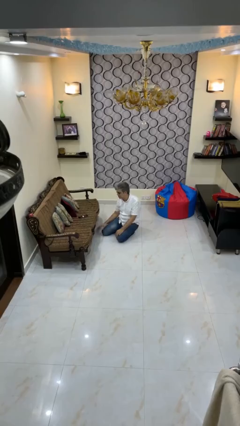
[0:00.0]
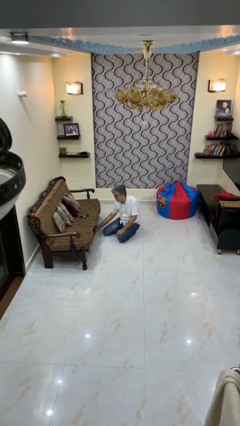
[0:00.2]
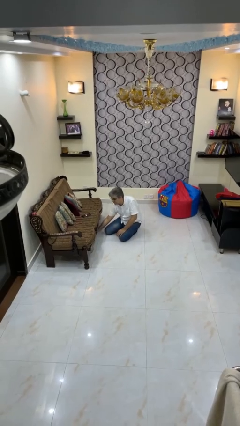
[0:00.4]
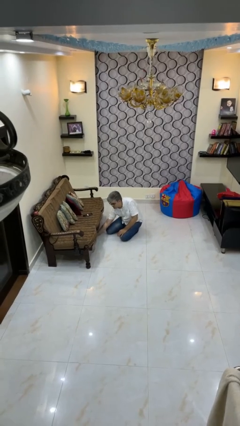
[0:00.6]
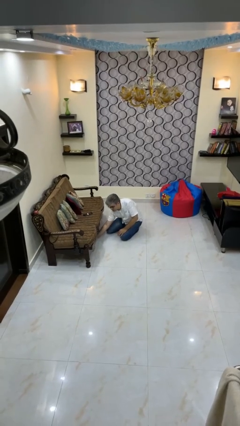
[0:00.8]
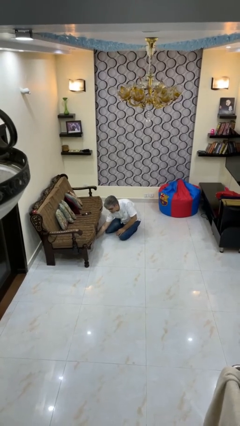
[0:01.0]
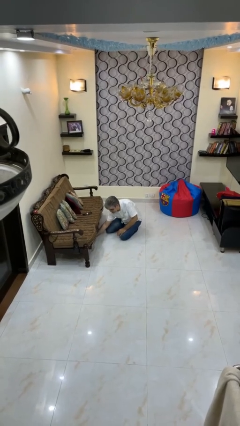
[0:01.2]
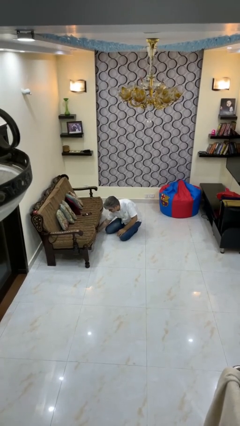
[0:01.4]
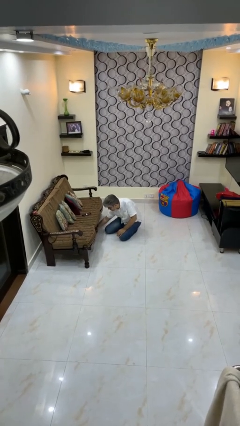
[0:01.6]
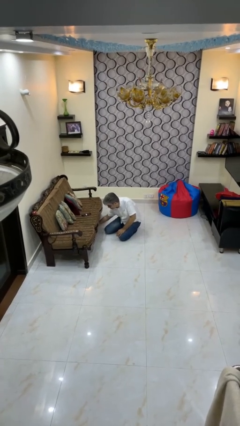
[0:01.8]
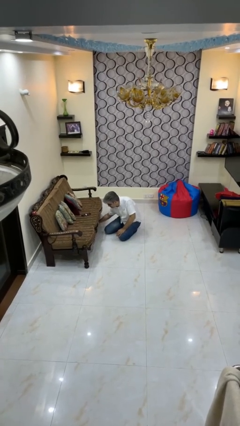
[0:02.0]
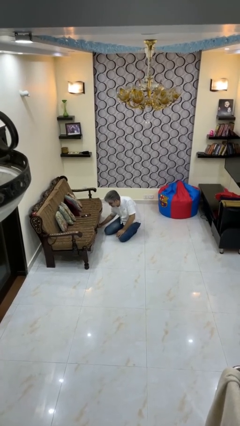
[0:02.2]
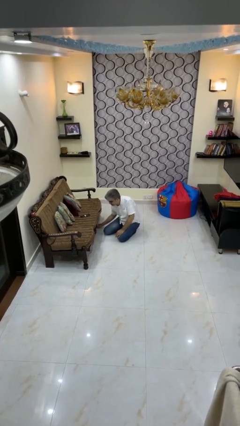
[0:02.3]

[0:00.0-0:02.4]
person searches under couch

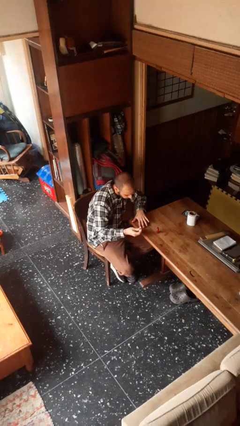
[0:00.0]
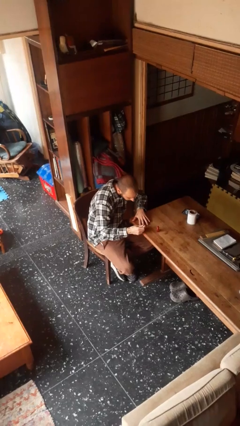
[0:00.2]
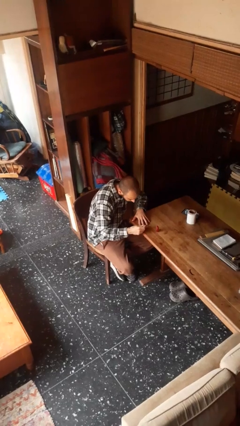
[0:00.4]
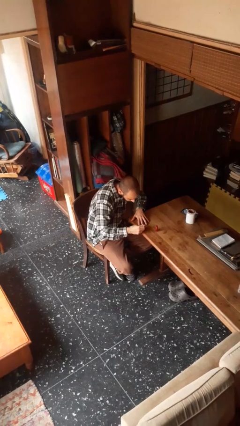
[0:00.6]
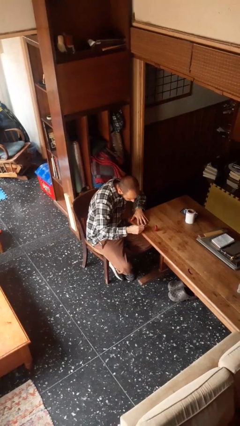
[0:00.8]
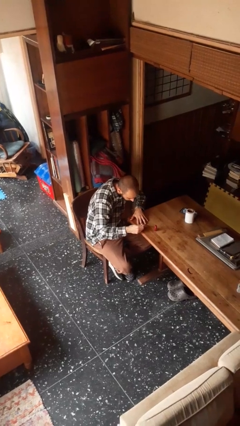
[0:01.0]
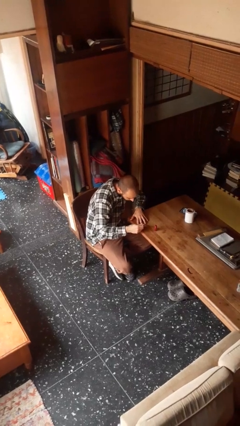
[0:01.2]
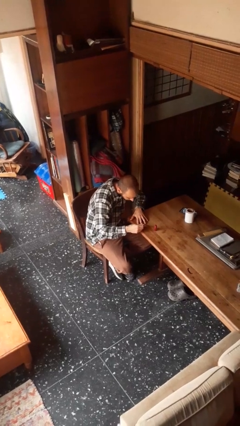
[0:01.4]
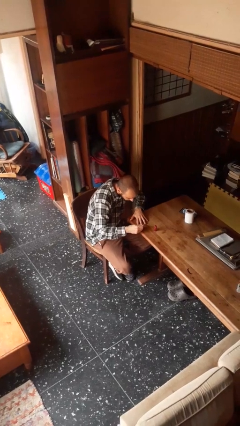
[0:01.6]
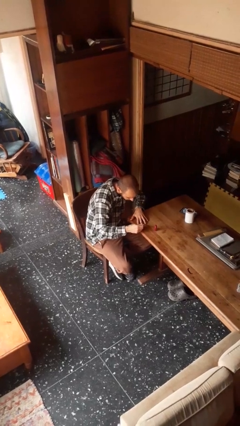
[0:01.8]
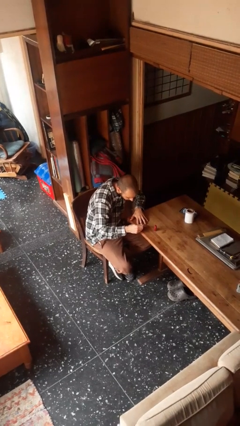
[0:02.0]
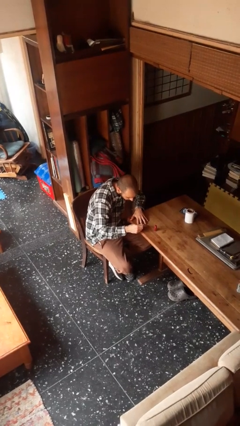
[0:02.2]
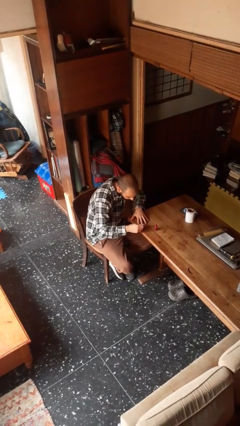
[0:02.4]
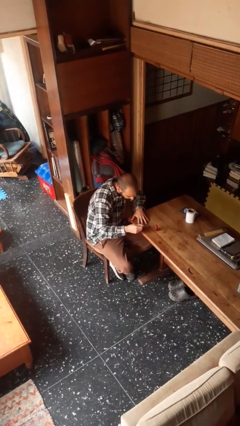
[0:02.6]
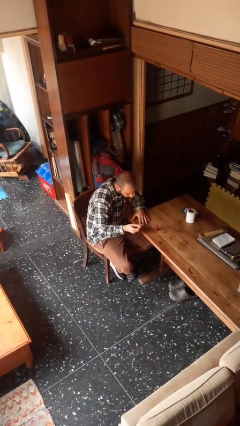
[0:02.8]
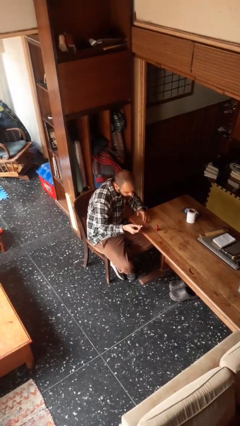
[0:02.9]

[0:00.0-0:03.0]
person paints fingernails

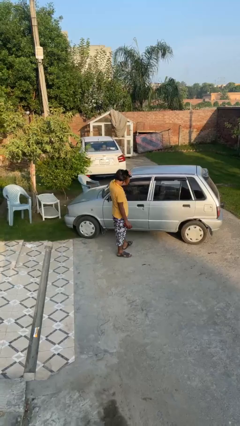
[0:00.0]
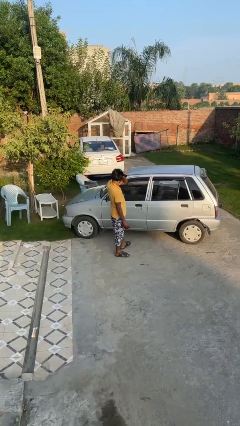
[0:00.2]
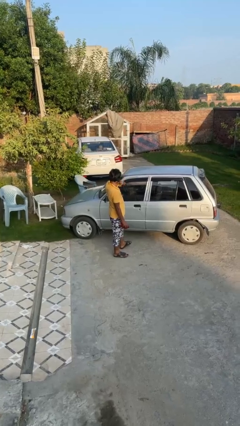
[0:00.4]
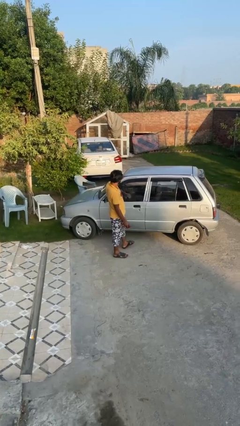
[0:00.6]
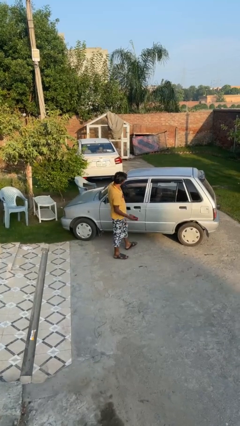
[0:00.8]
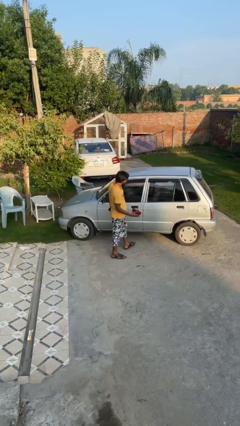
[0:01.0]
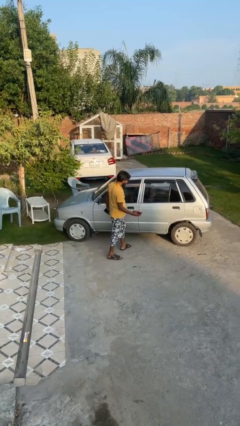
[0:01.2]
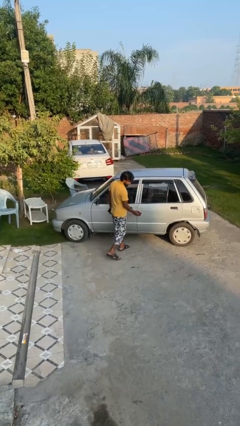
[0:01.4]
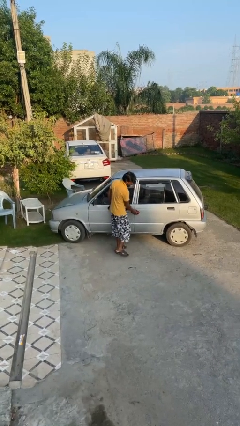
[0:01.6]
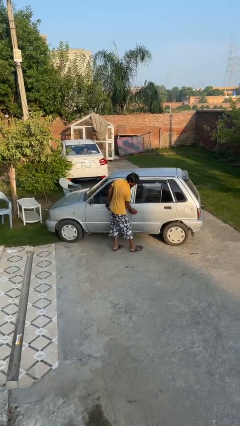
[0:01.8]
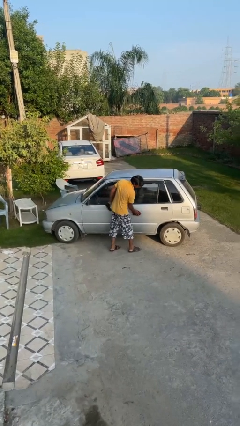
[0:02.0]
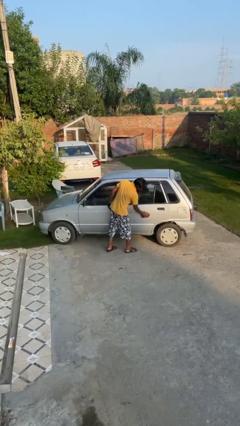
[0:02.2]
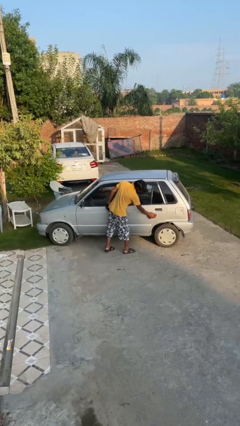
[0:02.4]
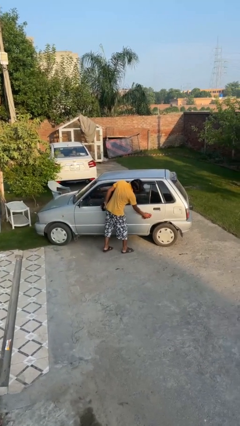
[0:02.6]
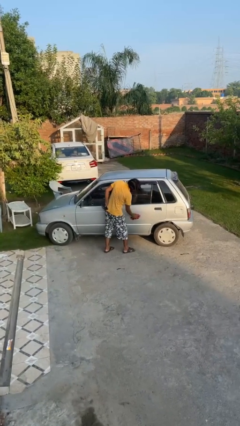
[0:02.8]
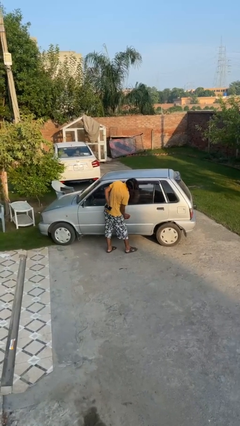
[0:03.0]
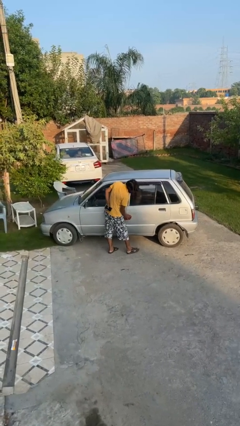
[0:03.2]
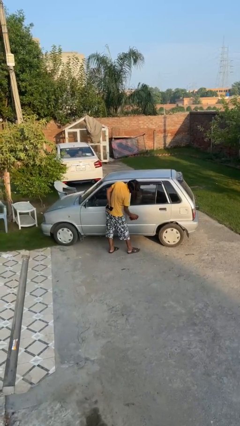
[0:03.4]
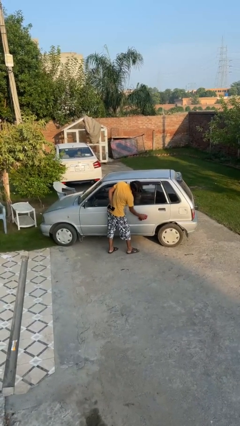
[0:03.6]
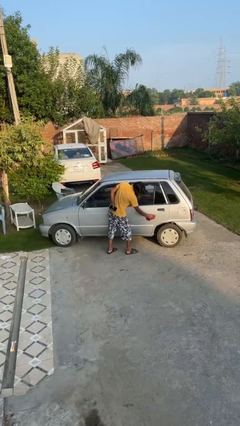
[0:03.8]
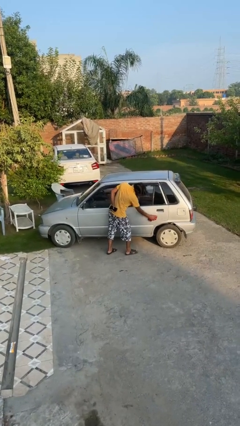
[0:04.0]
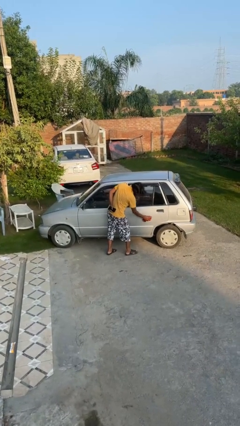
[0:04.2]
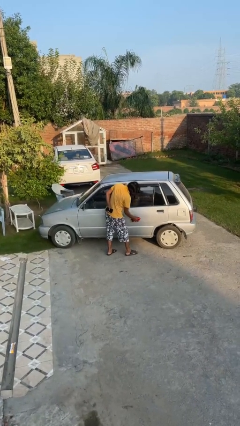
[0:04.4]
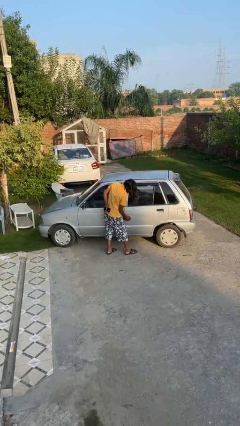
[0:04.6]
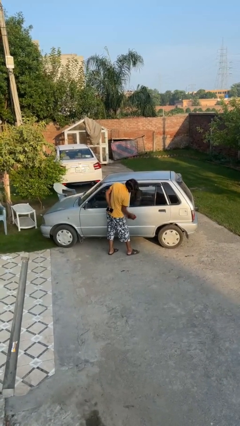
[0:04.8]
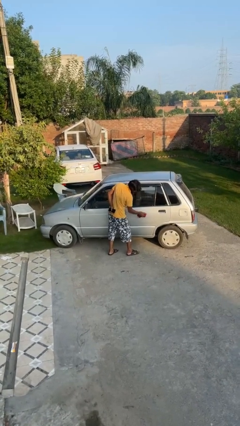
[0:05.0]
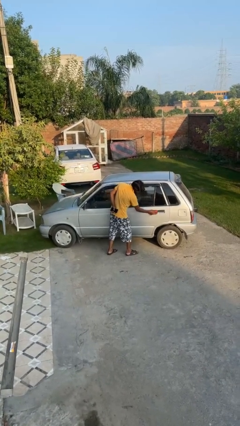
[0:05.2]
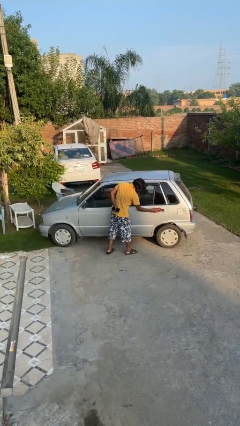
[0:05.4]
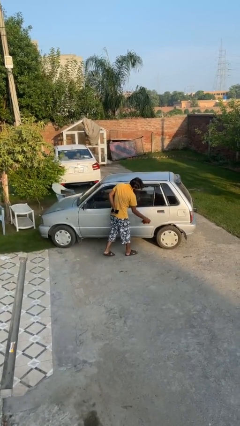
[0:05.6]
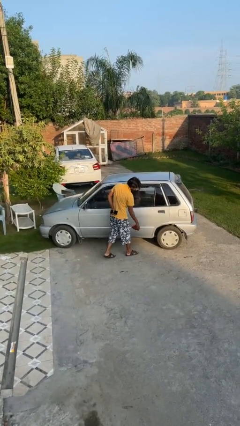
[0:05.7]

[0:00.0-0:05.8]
person polishes car with rag

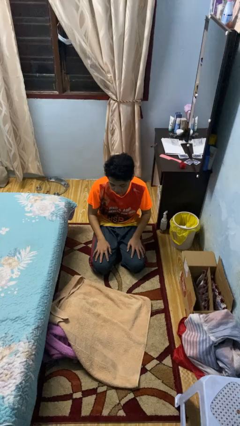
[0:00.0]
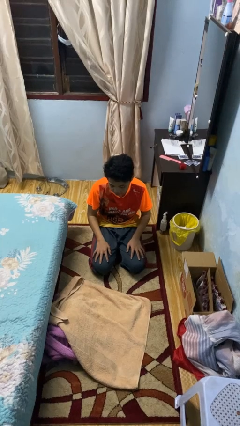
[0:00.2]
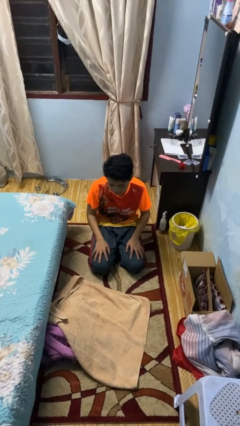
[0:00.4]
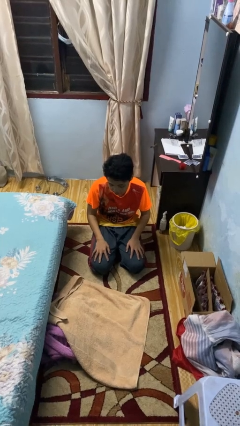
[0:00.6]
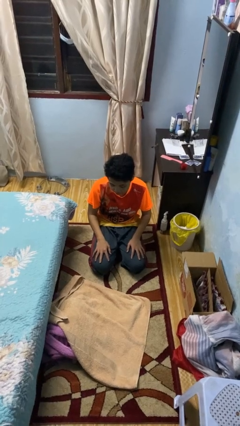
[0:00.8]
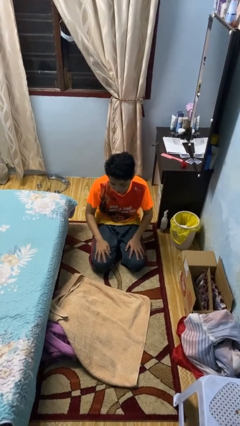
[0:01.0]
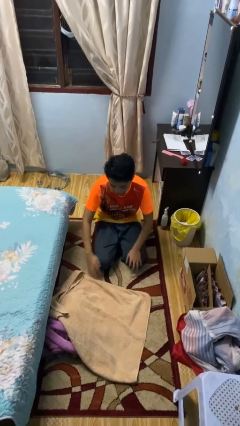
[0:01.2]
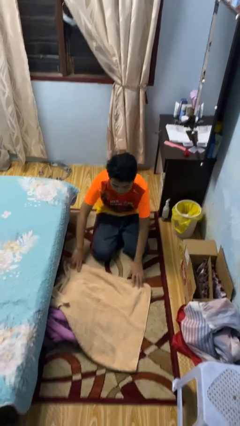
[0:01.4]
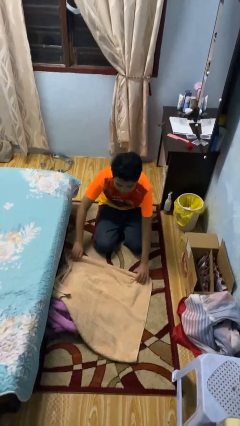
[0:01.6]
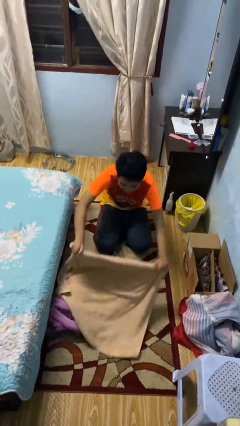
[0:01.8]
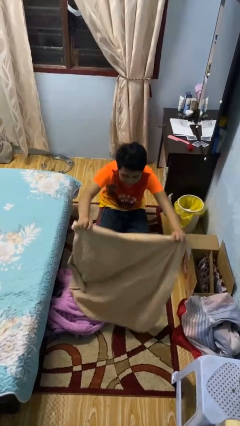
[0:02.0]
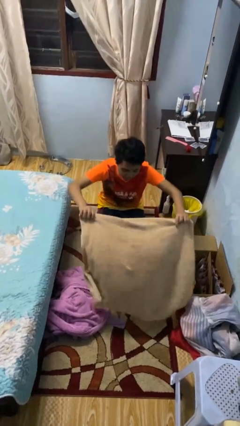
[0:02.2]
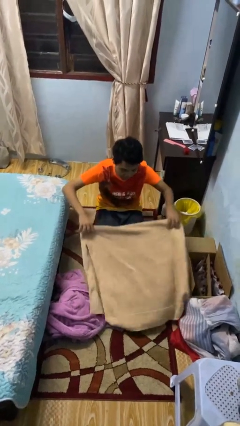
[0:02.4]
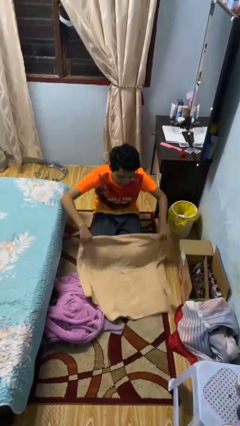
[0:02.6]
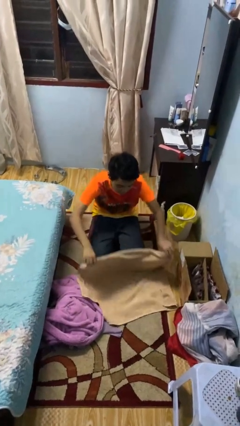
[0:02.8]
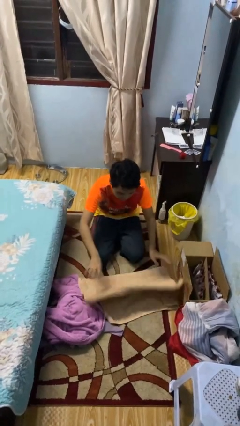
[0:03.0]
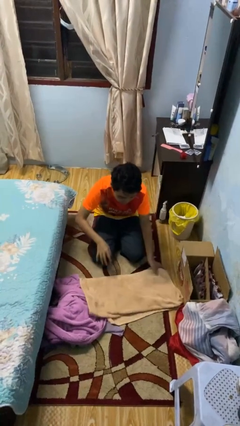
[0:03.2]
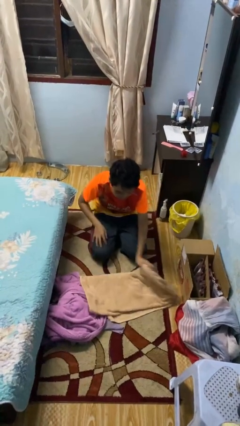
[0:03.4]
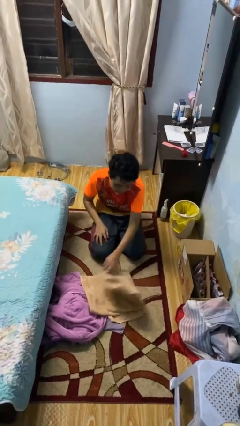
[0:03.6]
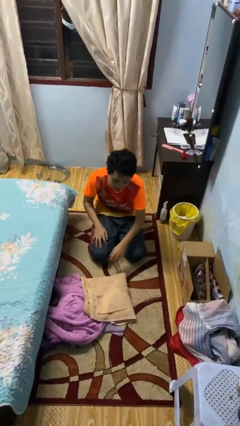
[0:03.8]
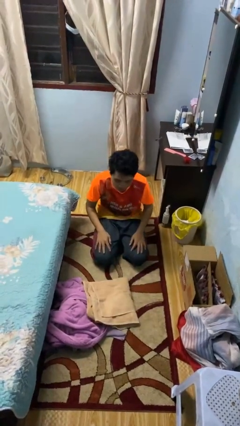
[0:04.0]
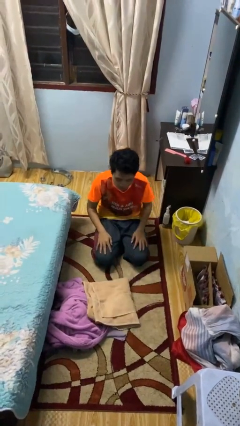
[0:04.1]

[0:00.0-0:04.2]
person folds towel

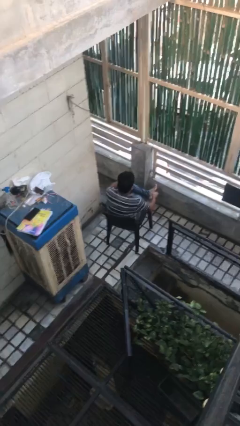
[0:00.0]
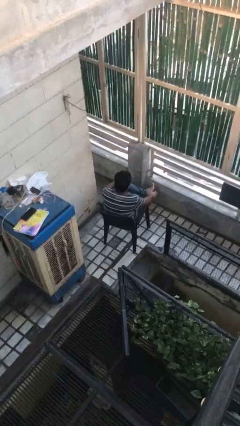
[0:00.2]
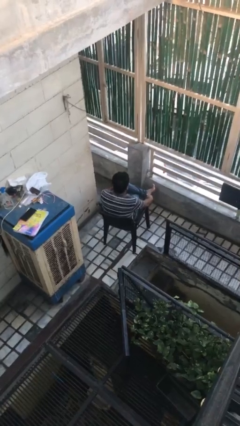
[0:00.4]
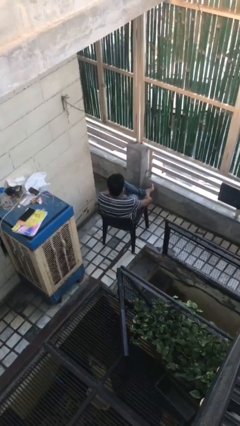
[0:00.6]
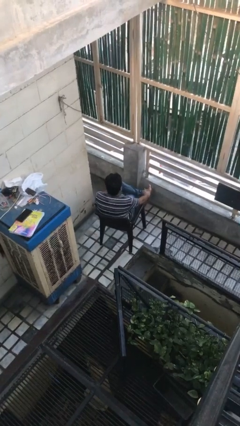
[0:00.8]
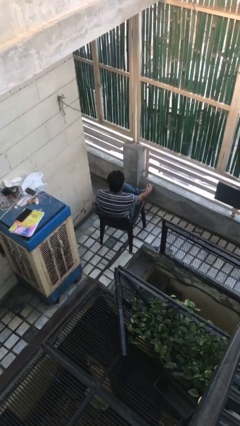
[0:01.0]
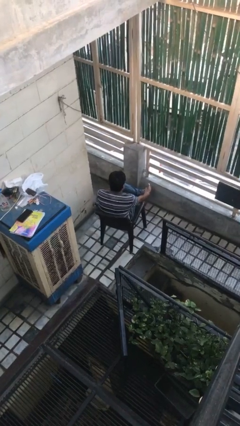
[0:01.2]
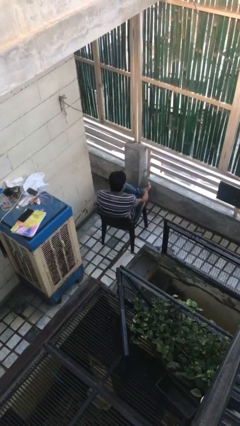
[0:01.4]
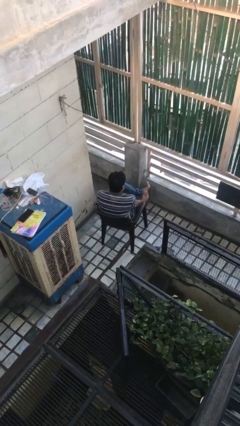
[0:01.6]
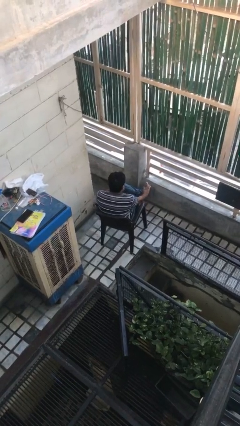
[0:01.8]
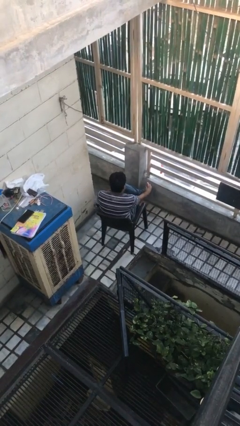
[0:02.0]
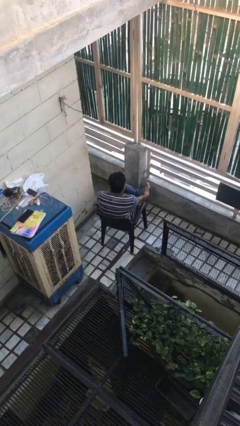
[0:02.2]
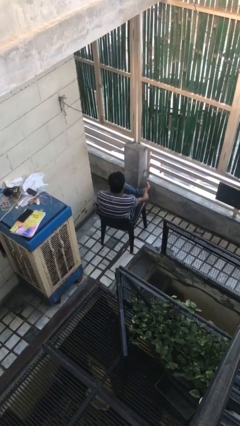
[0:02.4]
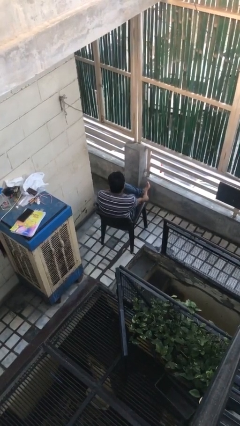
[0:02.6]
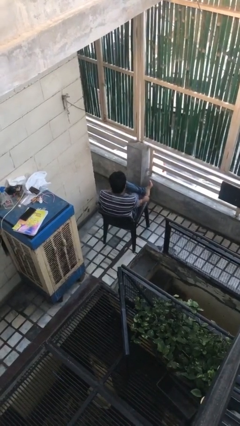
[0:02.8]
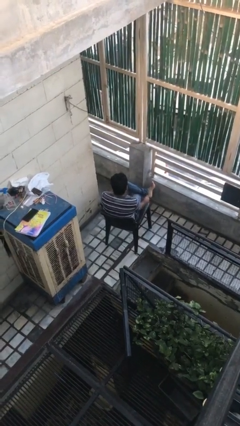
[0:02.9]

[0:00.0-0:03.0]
person rubs foot
